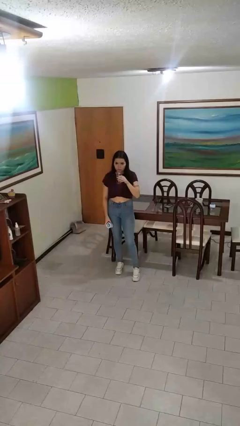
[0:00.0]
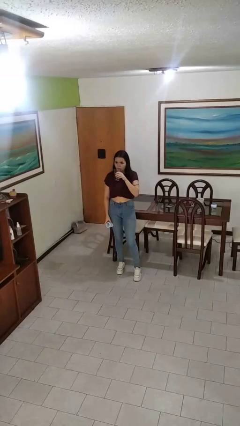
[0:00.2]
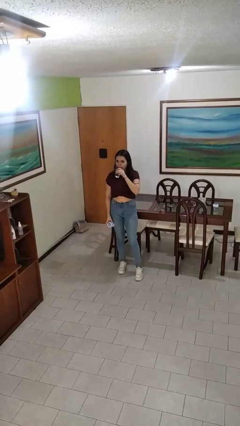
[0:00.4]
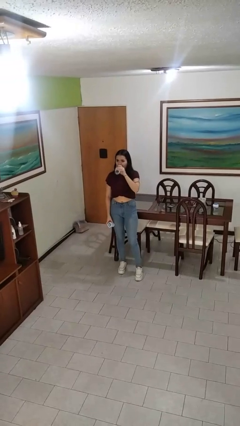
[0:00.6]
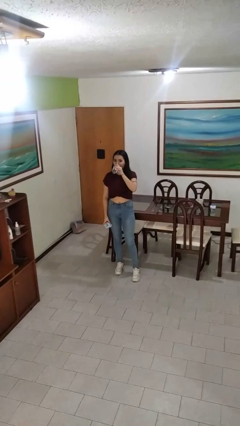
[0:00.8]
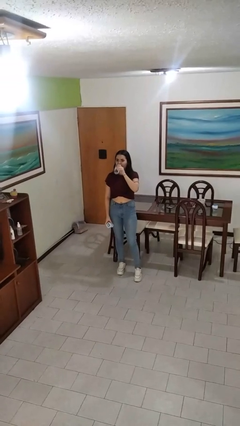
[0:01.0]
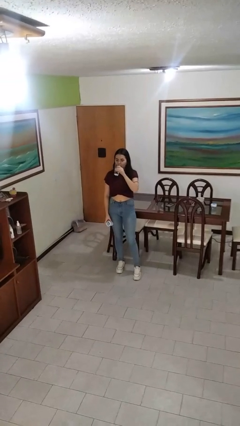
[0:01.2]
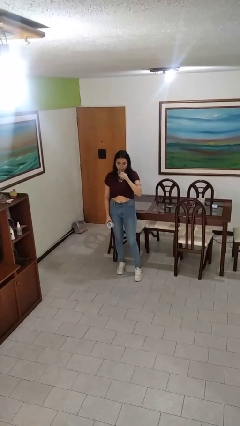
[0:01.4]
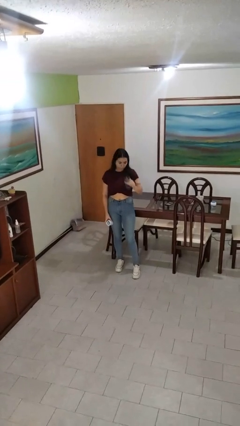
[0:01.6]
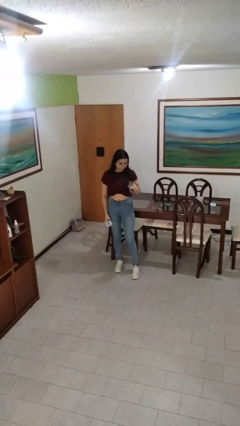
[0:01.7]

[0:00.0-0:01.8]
person drinks from cup

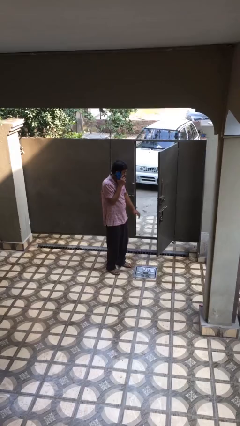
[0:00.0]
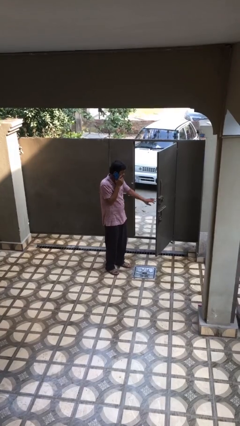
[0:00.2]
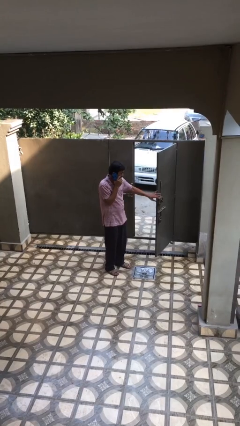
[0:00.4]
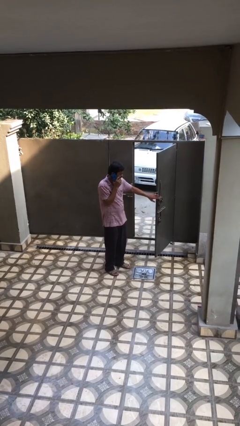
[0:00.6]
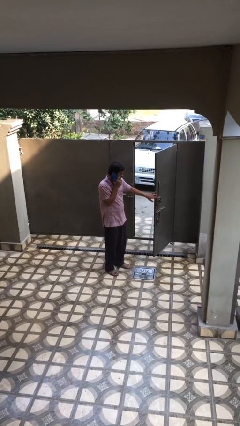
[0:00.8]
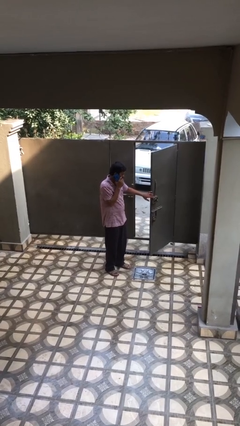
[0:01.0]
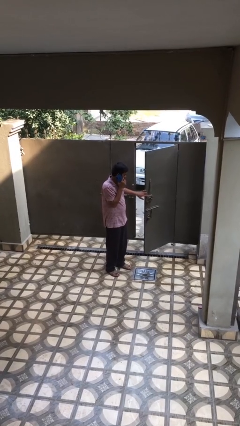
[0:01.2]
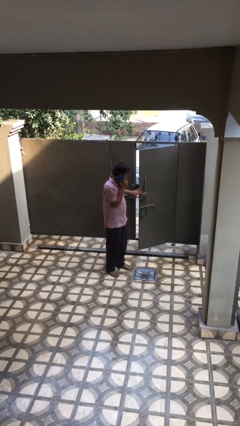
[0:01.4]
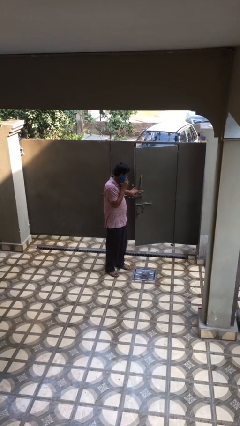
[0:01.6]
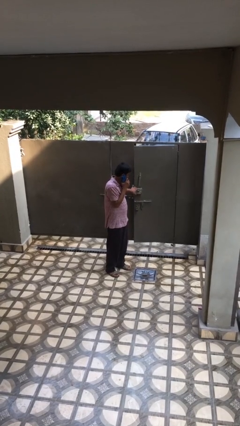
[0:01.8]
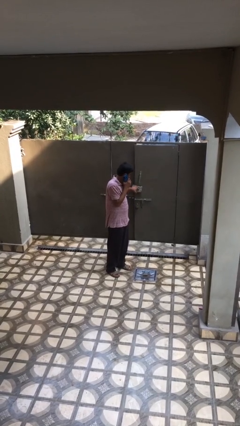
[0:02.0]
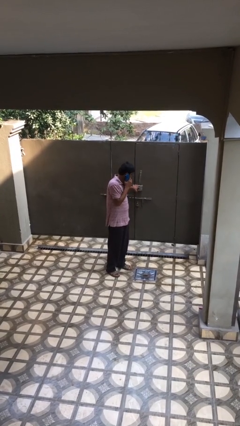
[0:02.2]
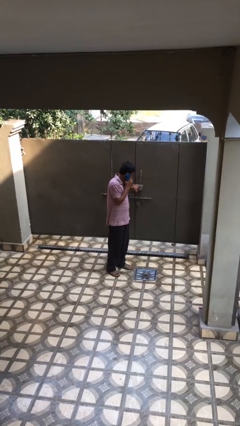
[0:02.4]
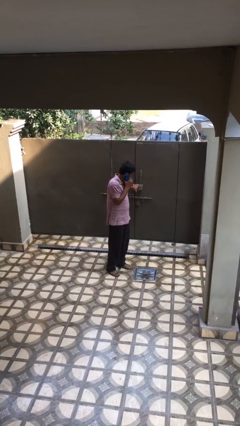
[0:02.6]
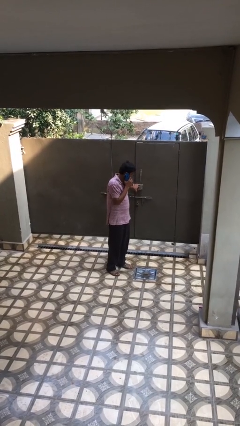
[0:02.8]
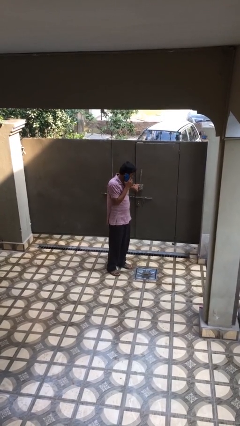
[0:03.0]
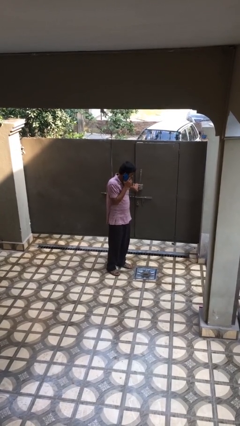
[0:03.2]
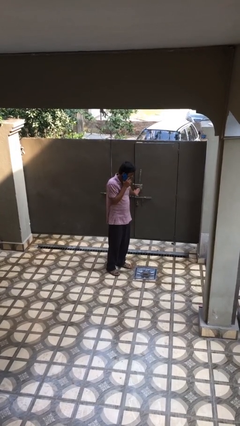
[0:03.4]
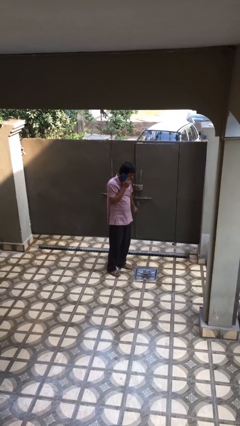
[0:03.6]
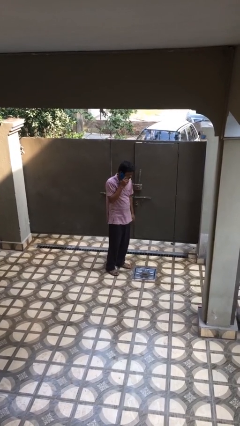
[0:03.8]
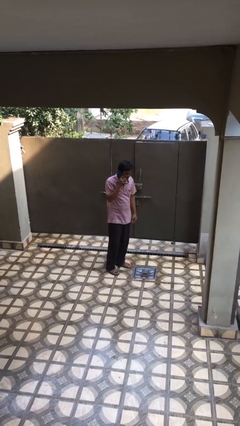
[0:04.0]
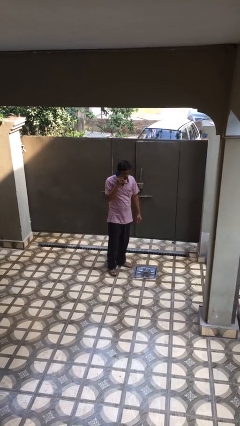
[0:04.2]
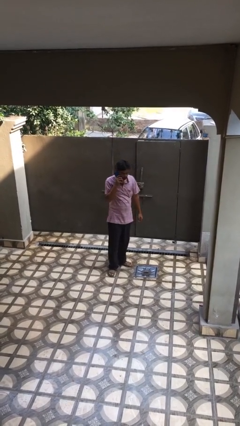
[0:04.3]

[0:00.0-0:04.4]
person closes facility door

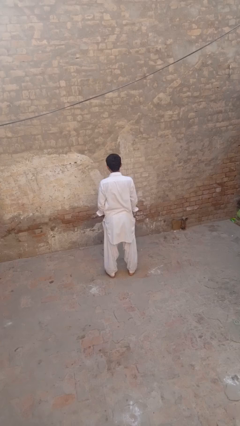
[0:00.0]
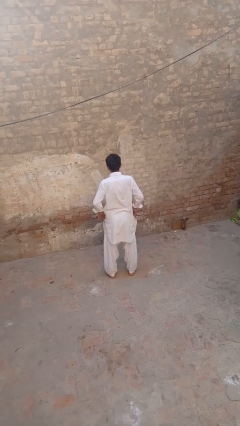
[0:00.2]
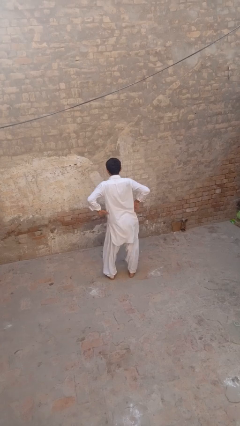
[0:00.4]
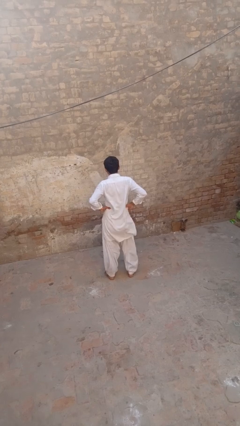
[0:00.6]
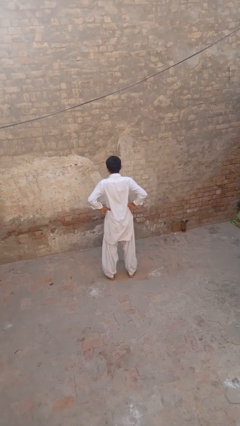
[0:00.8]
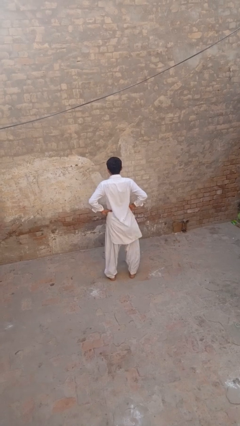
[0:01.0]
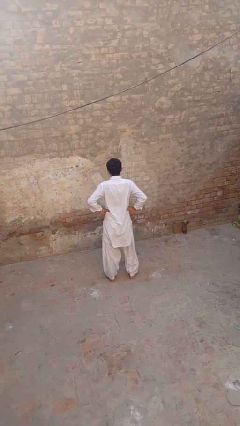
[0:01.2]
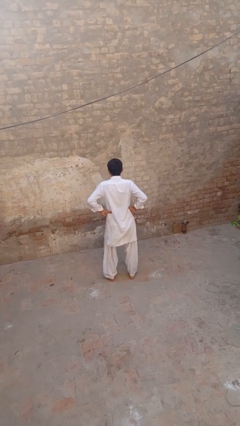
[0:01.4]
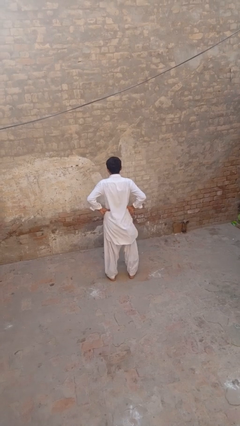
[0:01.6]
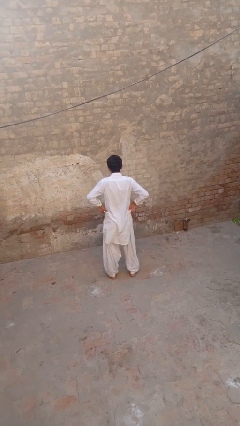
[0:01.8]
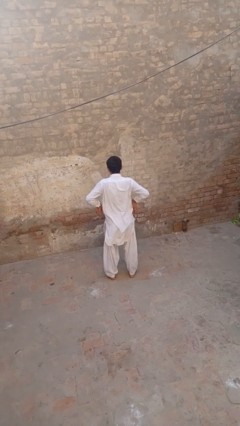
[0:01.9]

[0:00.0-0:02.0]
person wiggles hips

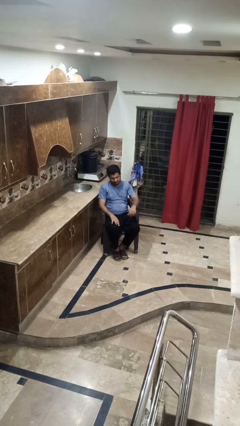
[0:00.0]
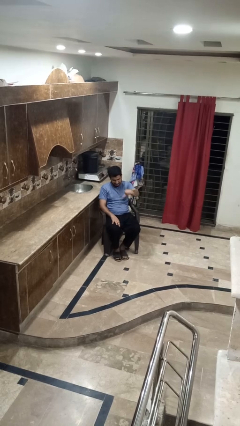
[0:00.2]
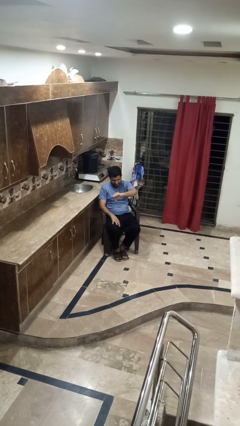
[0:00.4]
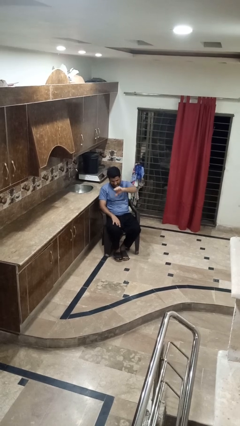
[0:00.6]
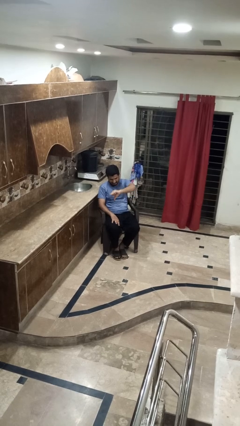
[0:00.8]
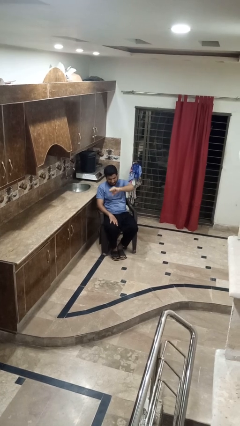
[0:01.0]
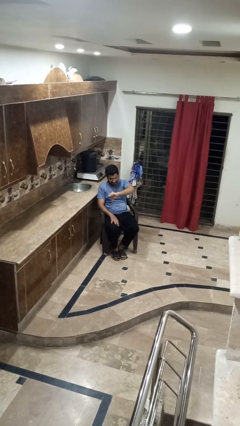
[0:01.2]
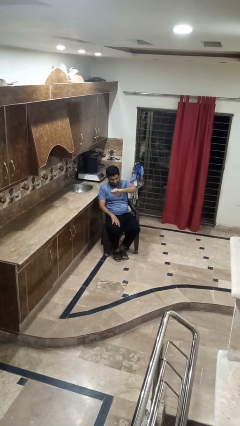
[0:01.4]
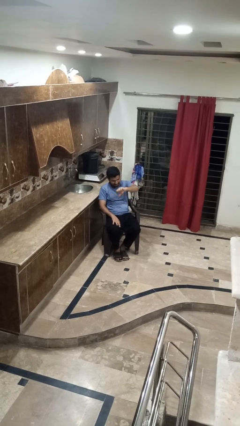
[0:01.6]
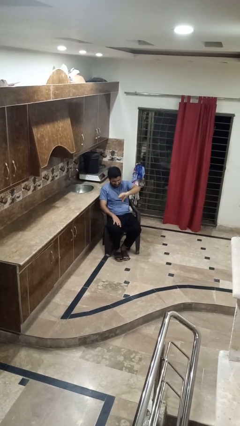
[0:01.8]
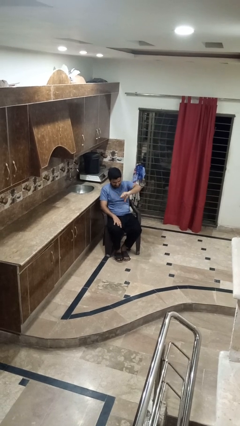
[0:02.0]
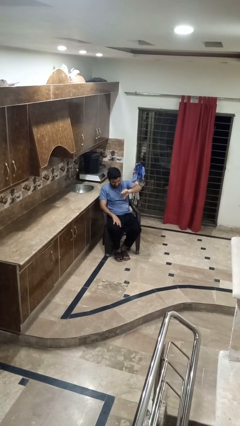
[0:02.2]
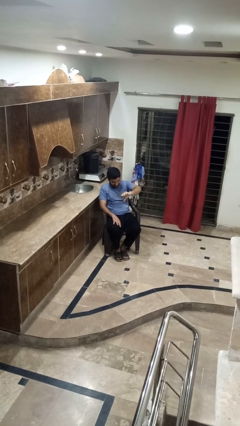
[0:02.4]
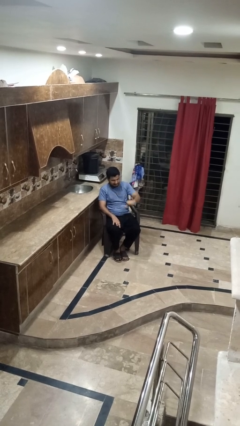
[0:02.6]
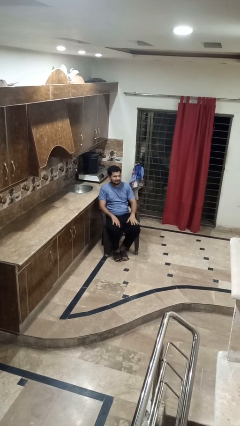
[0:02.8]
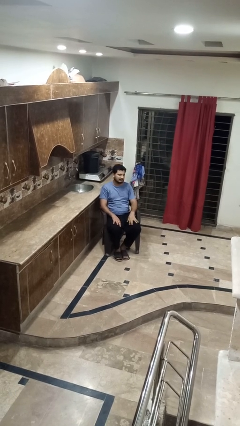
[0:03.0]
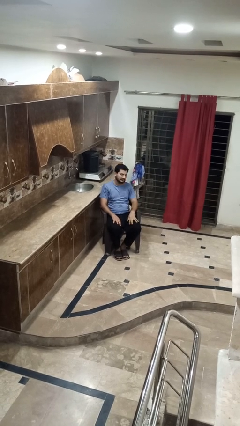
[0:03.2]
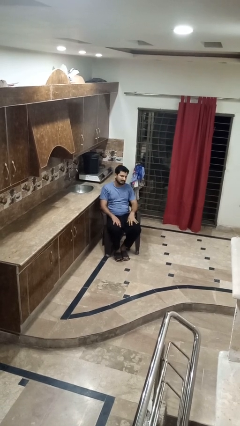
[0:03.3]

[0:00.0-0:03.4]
person gestures thumbs down

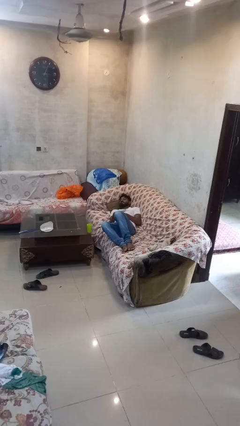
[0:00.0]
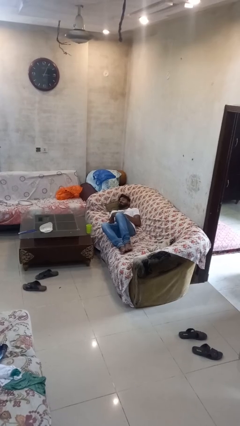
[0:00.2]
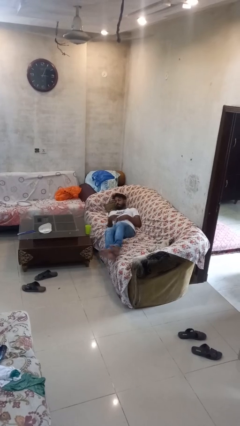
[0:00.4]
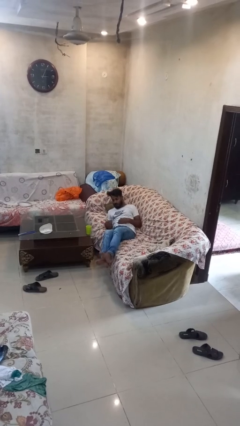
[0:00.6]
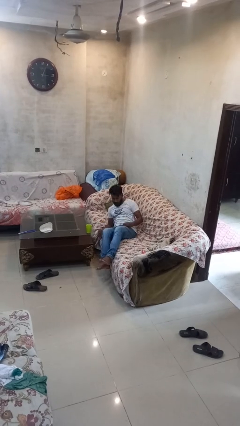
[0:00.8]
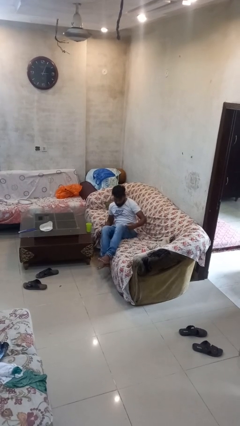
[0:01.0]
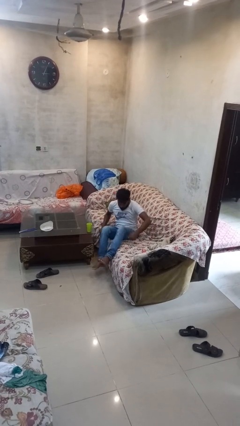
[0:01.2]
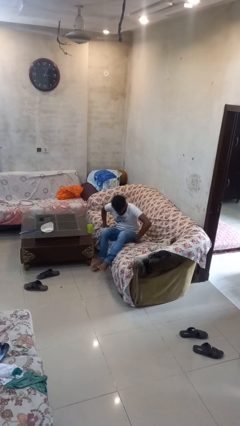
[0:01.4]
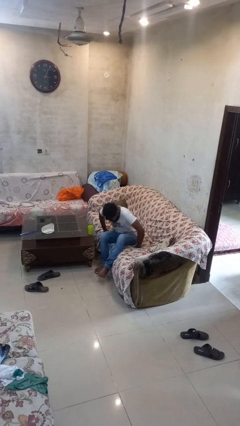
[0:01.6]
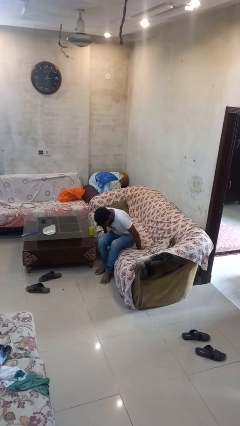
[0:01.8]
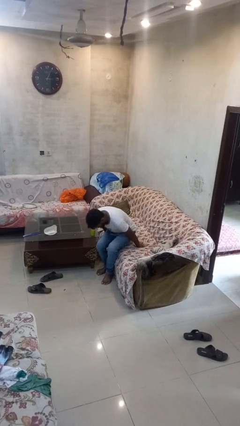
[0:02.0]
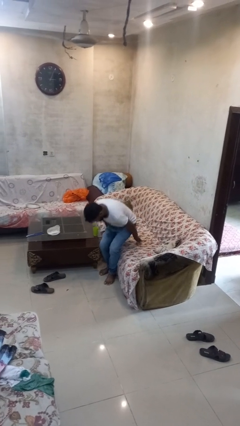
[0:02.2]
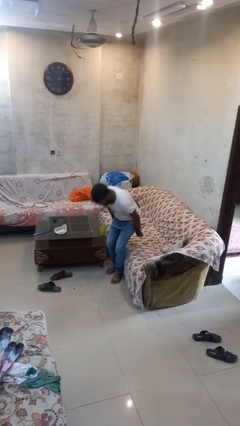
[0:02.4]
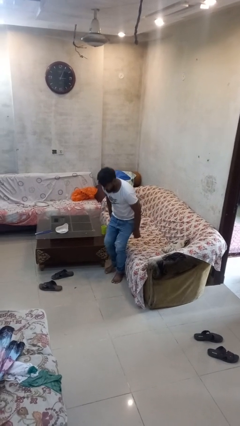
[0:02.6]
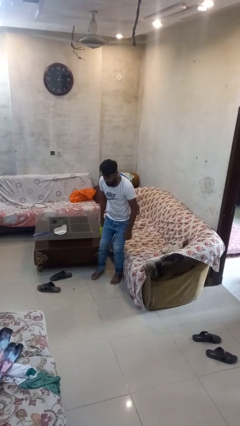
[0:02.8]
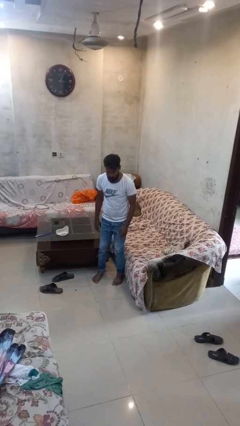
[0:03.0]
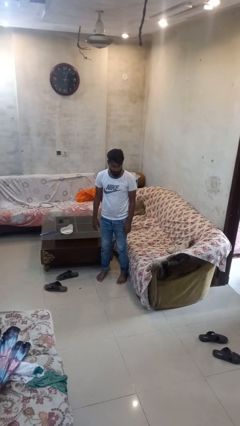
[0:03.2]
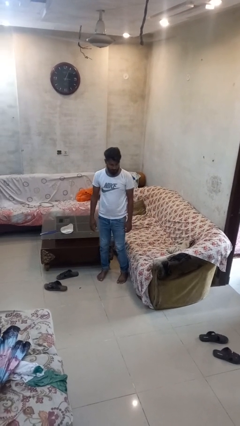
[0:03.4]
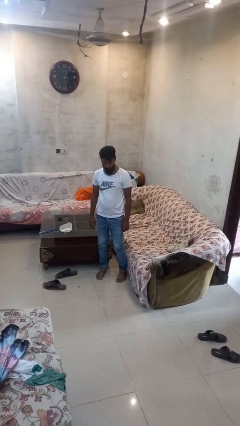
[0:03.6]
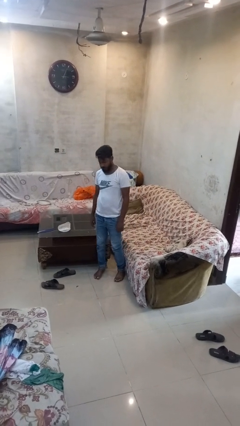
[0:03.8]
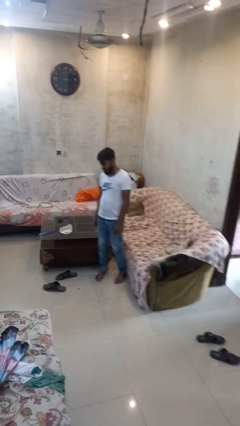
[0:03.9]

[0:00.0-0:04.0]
person stands up

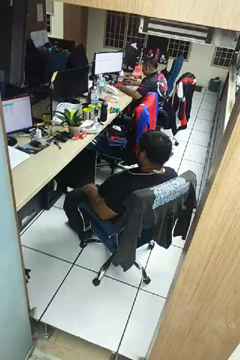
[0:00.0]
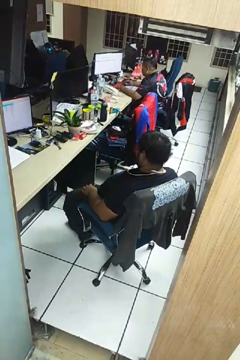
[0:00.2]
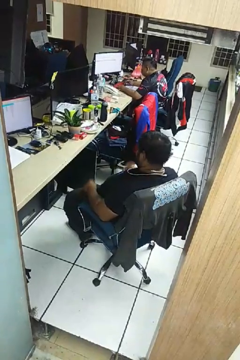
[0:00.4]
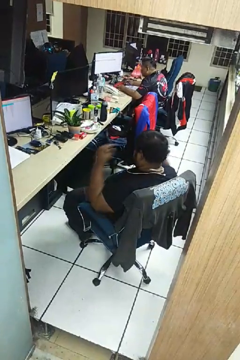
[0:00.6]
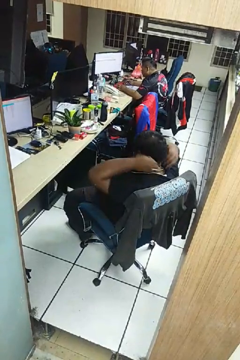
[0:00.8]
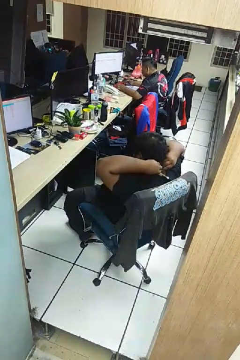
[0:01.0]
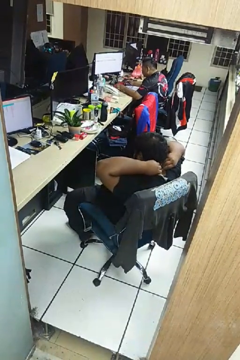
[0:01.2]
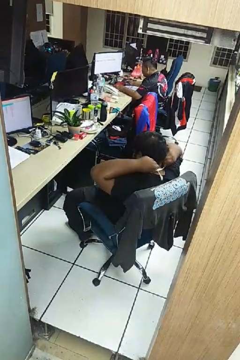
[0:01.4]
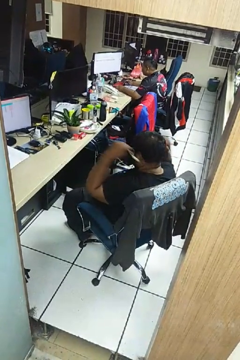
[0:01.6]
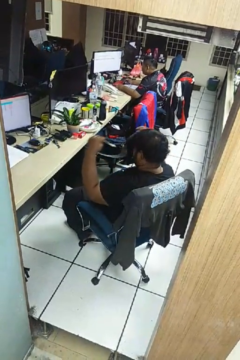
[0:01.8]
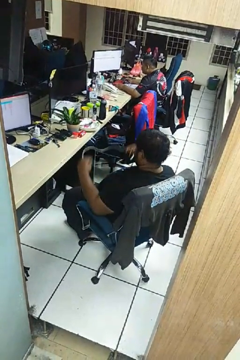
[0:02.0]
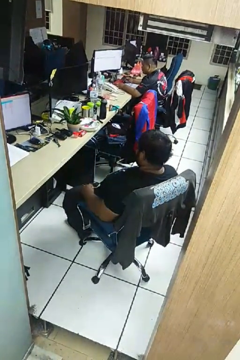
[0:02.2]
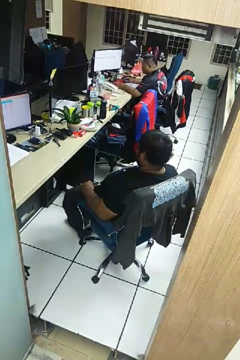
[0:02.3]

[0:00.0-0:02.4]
person takes off necklace
